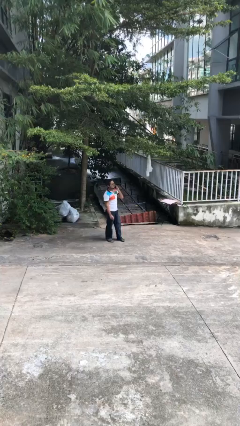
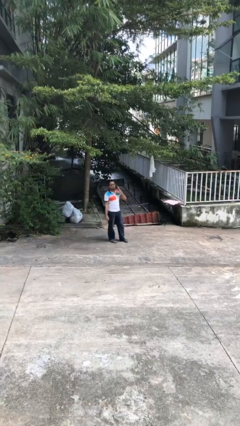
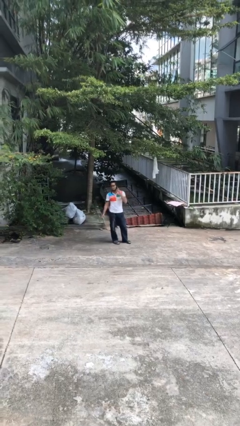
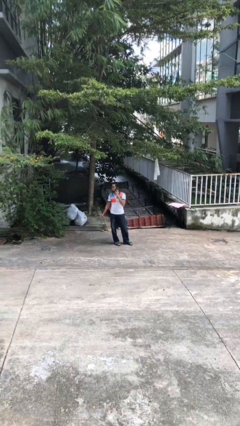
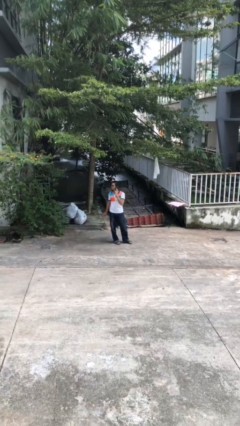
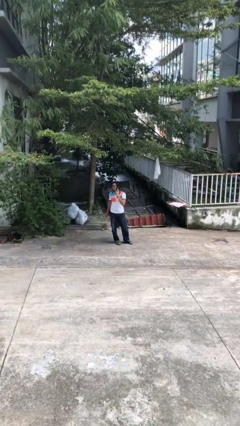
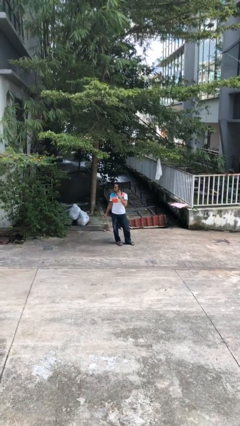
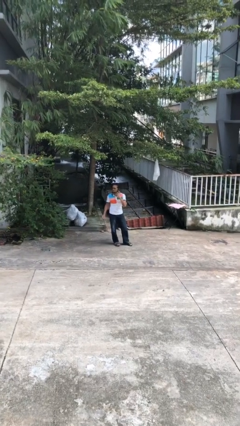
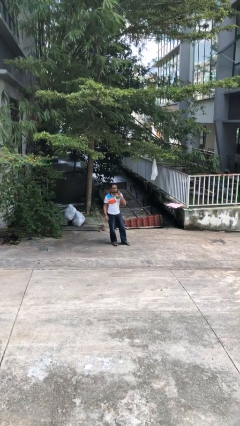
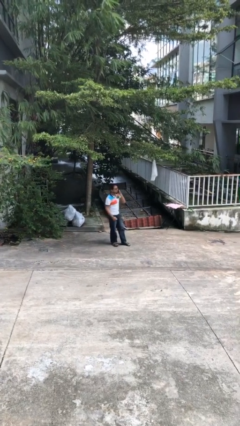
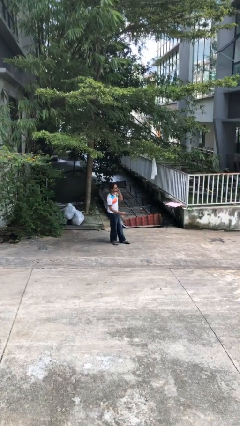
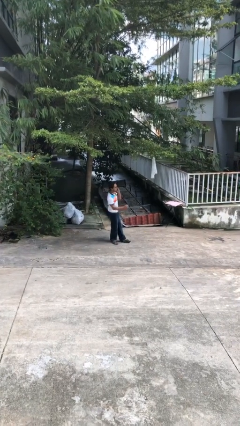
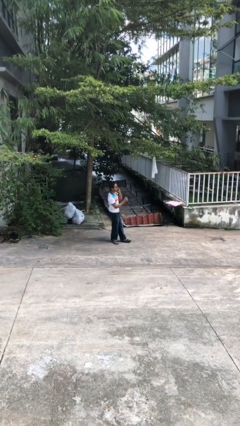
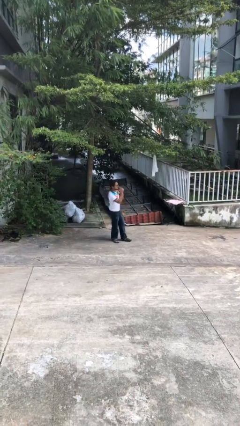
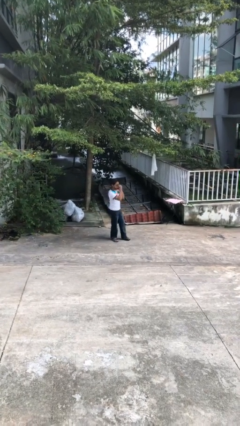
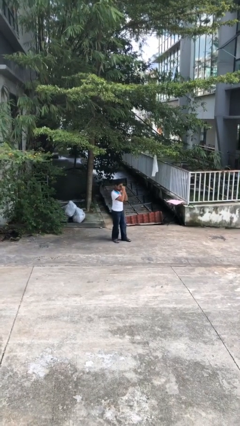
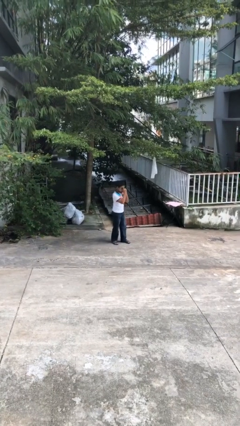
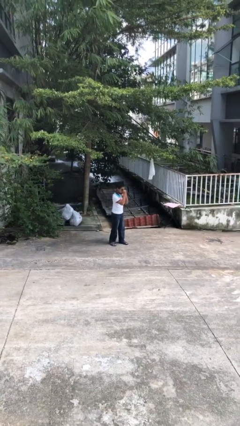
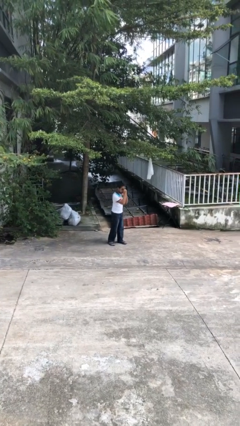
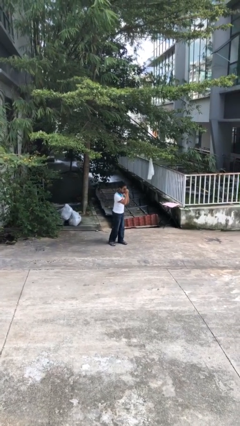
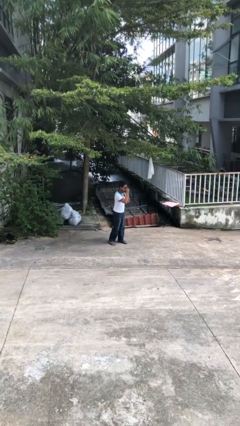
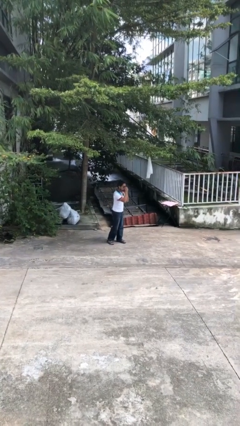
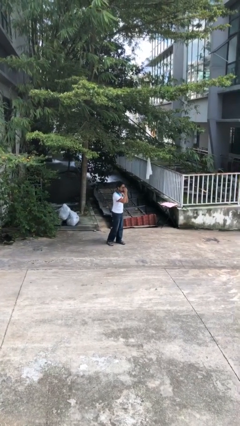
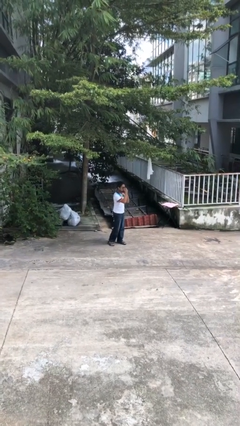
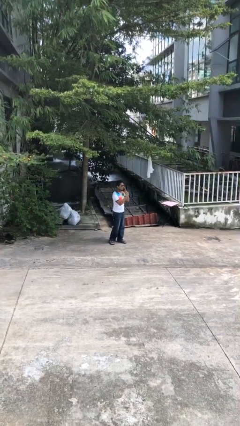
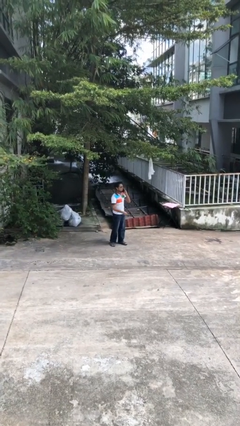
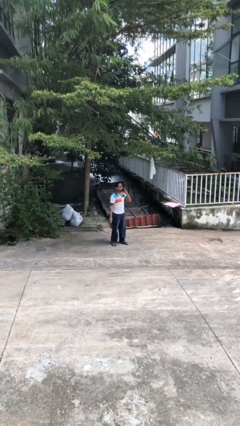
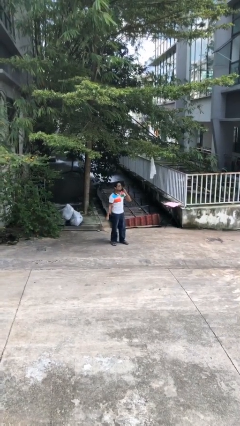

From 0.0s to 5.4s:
person talks on phone

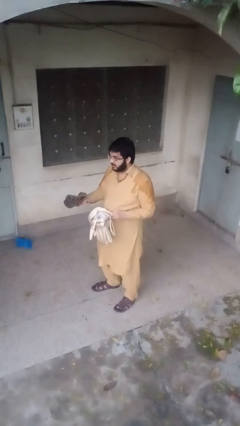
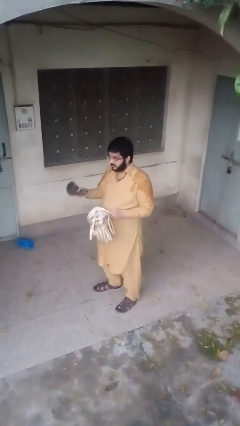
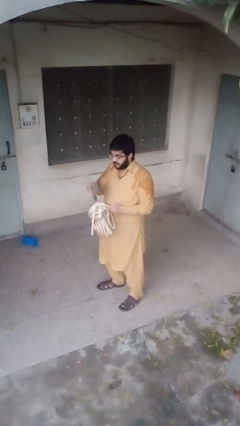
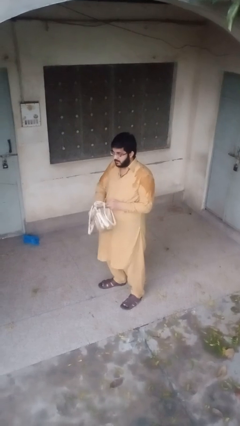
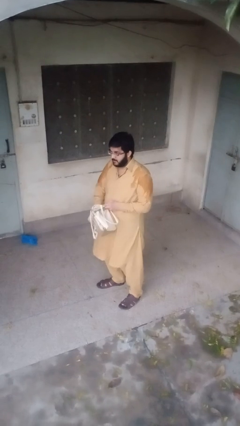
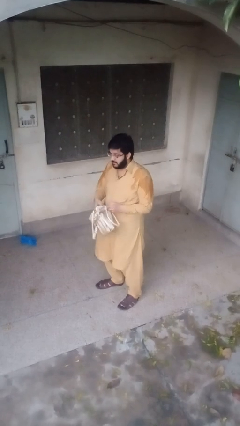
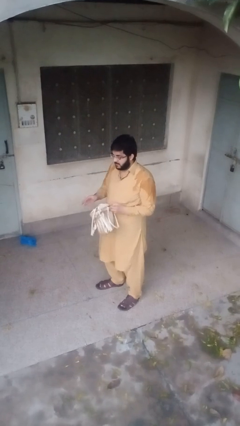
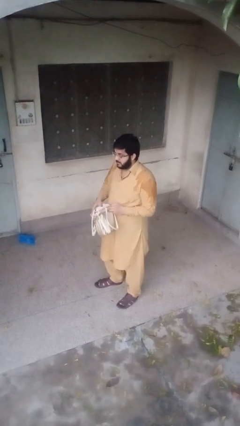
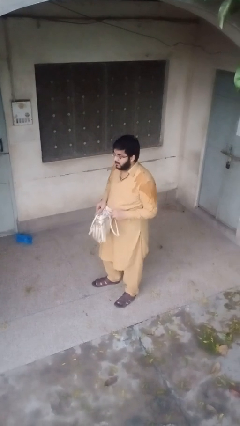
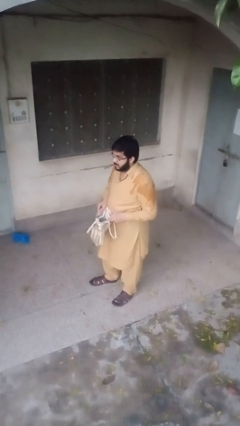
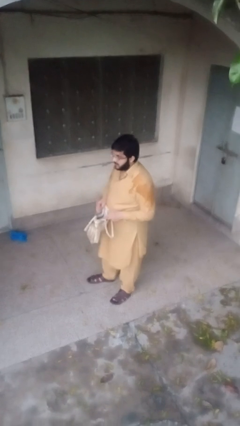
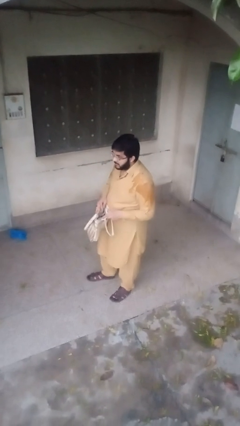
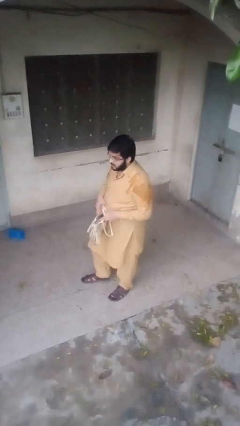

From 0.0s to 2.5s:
person puts object into purse

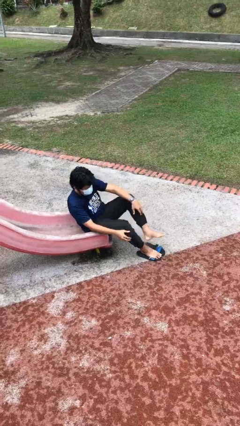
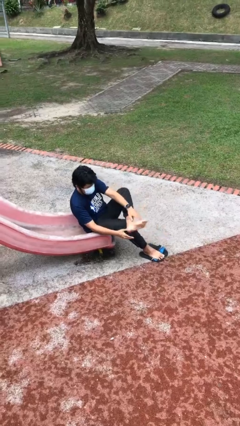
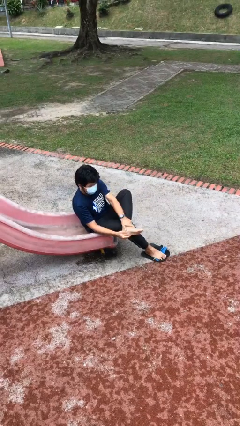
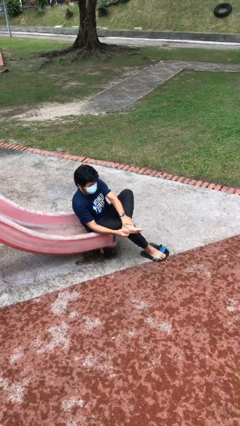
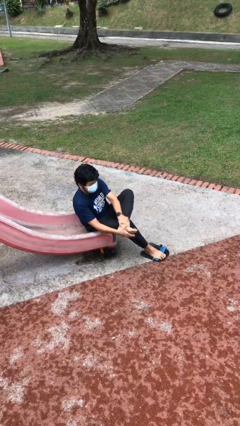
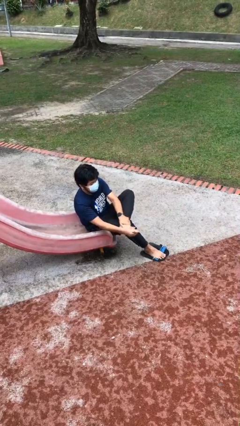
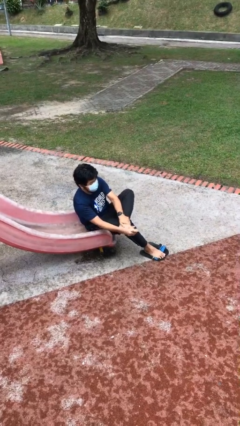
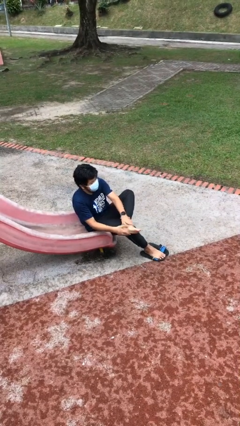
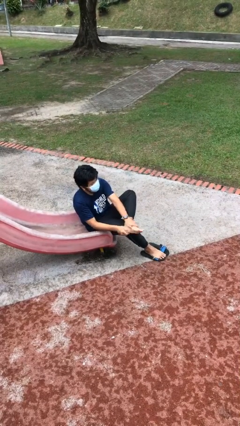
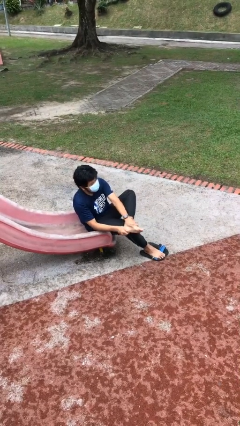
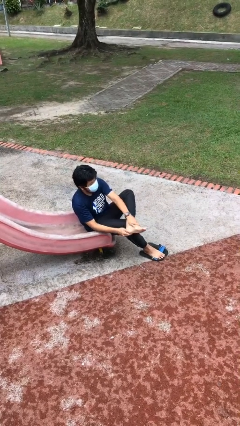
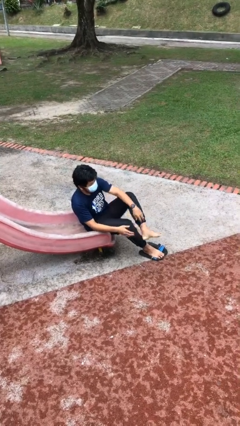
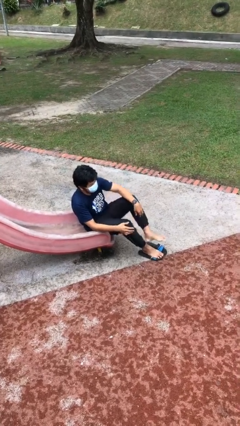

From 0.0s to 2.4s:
person rubs foot

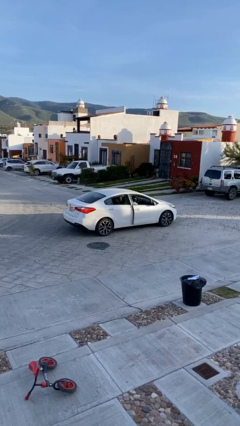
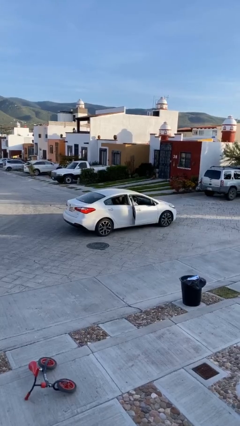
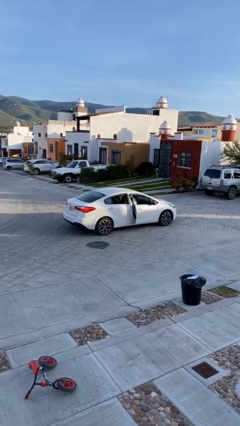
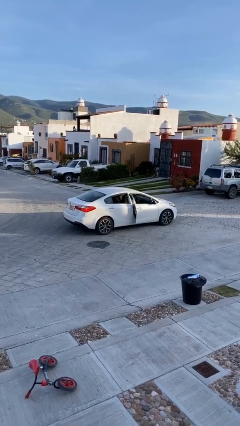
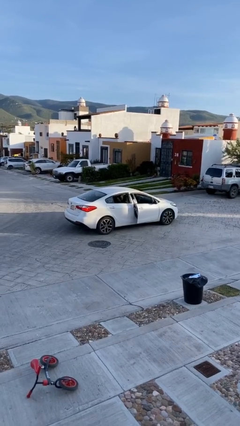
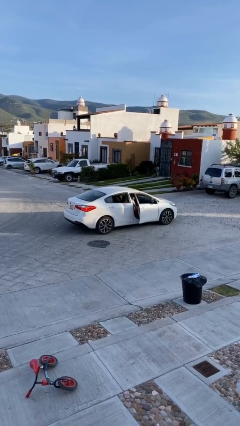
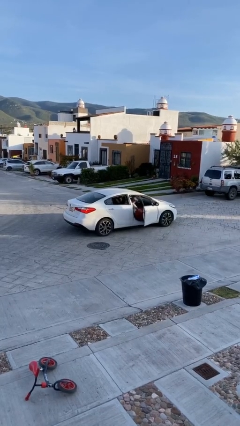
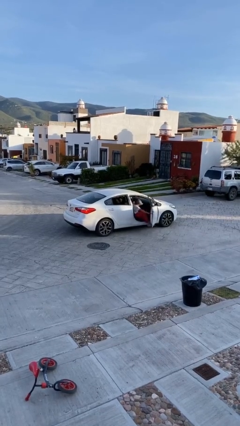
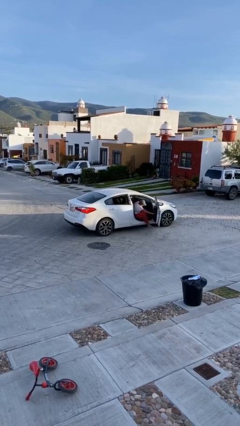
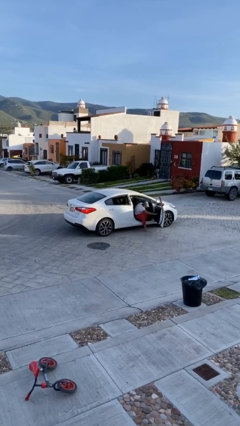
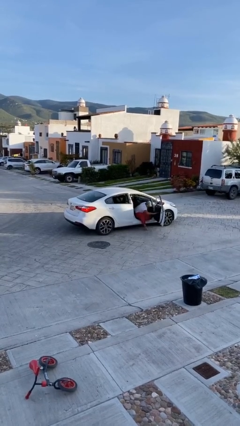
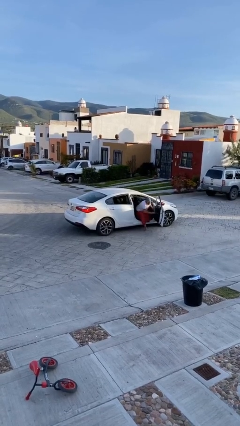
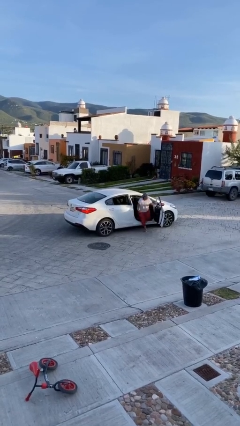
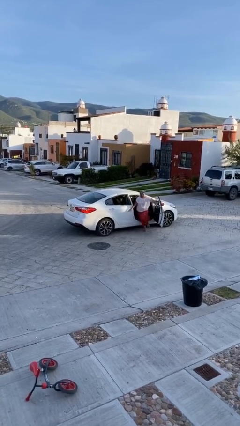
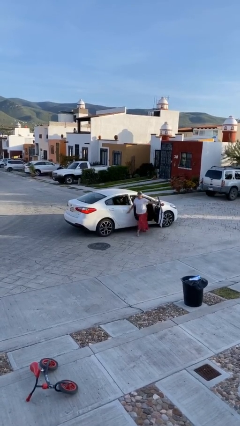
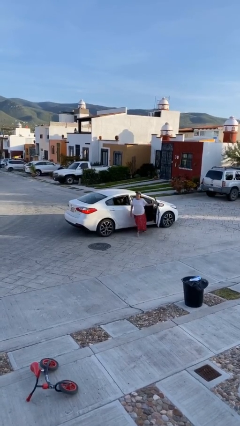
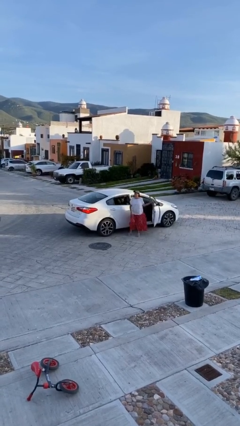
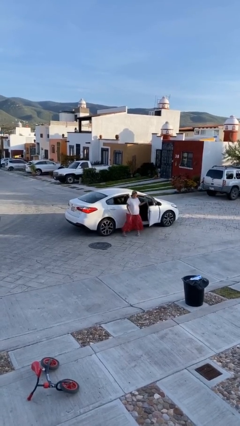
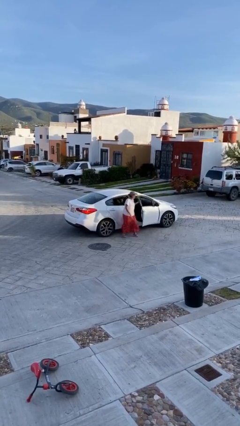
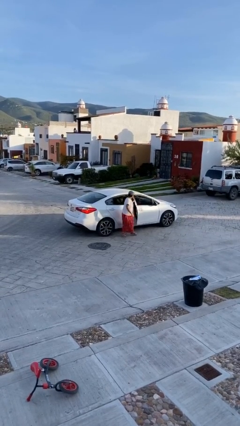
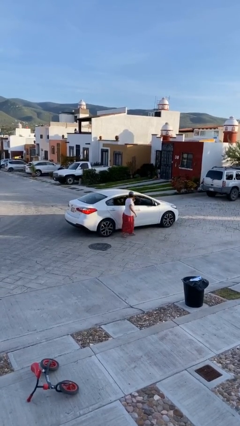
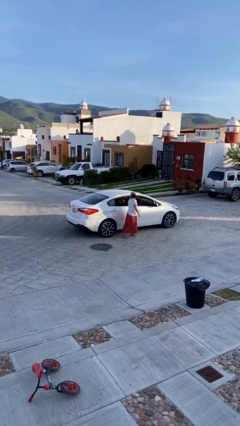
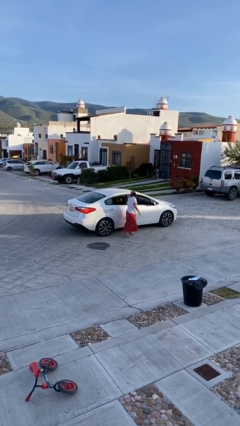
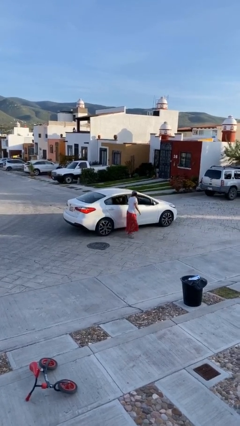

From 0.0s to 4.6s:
car drops off person

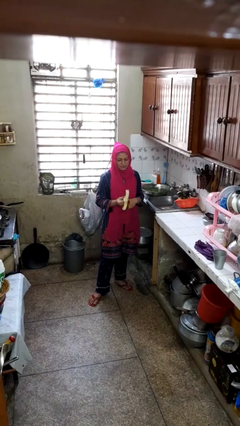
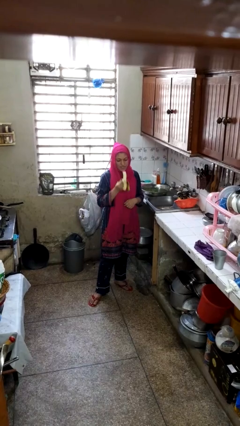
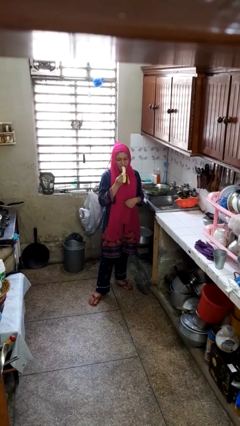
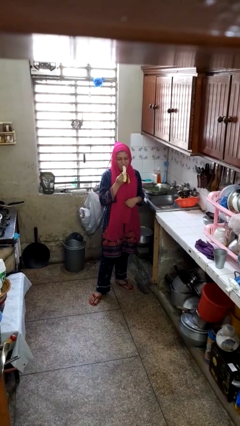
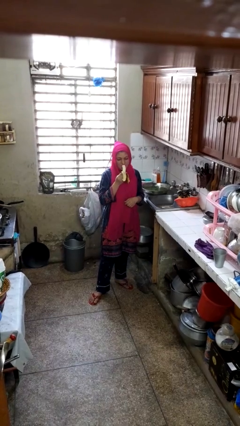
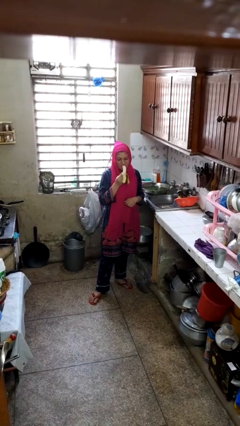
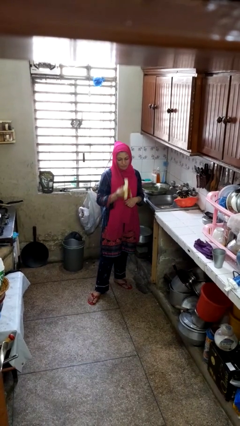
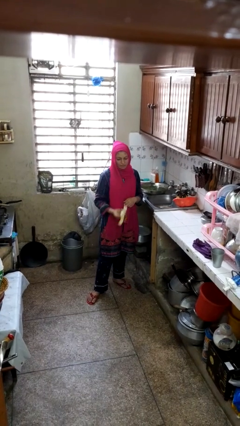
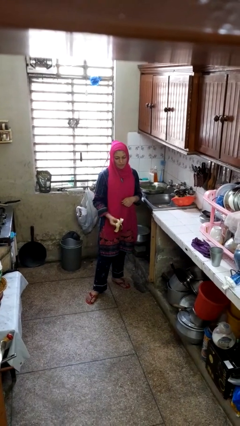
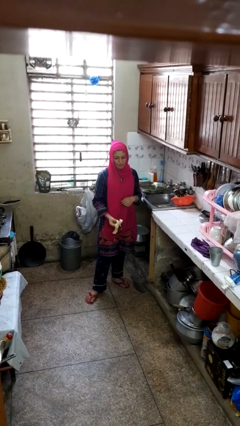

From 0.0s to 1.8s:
person eats banana

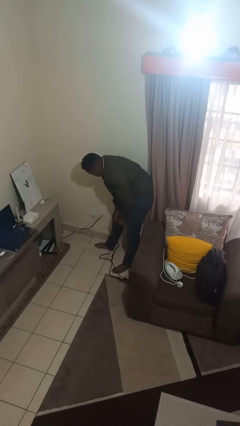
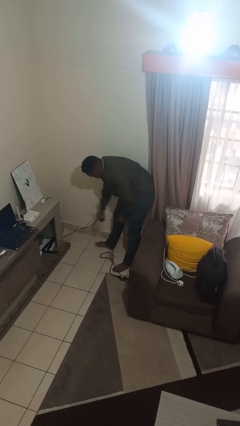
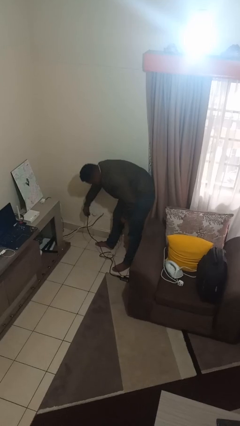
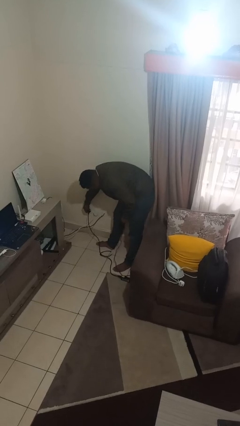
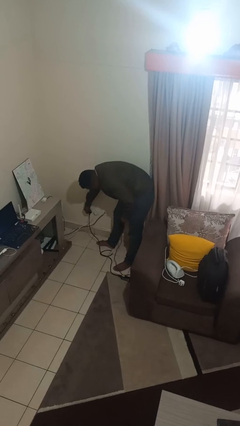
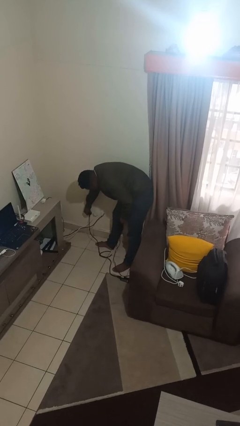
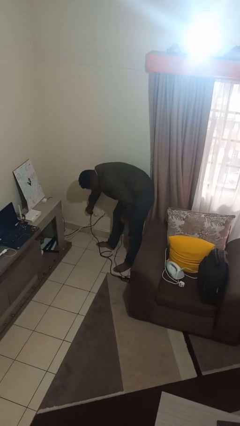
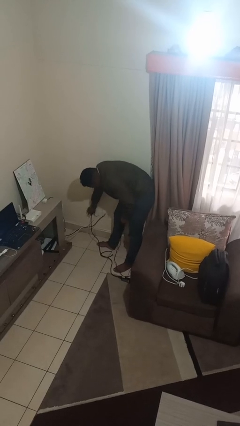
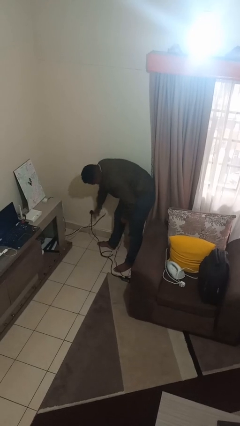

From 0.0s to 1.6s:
person plugs into electrical socket
